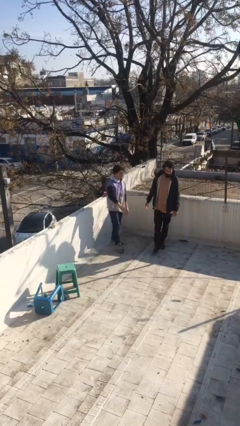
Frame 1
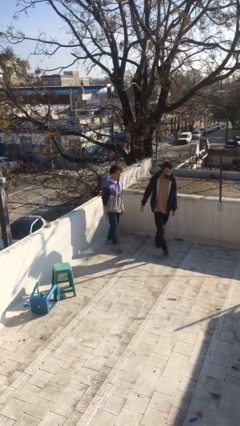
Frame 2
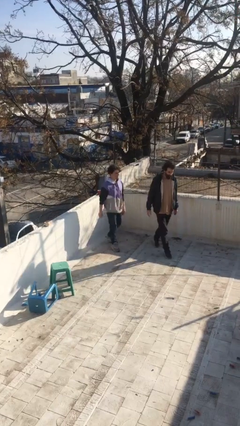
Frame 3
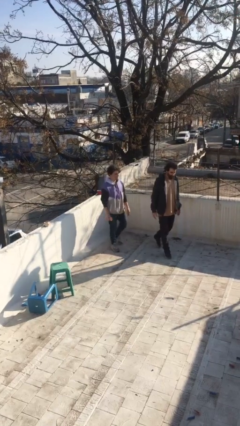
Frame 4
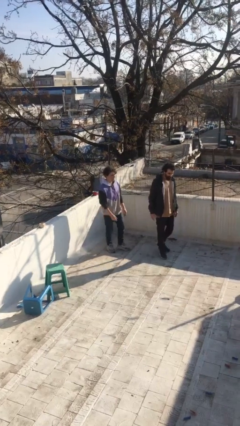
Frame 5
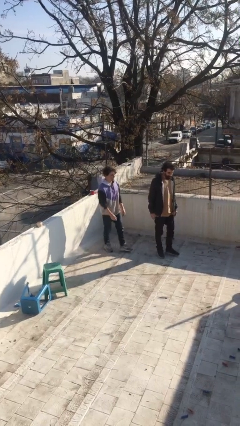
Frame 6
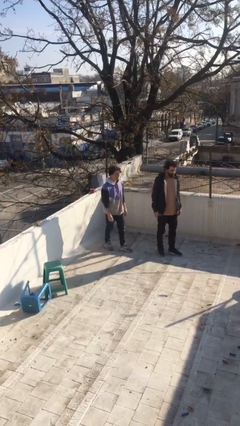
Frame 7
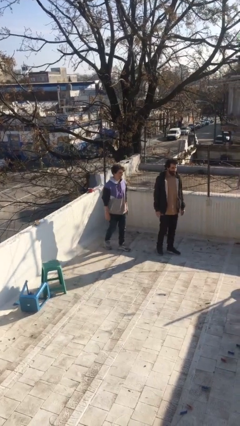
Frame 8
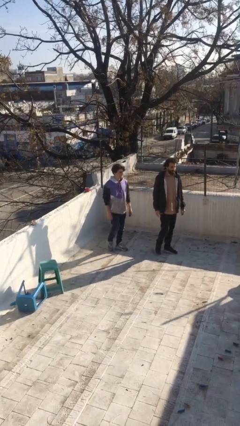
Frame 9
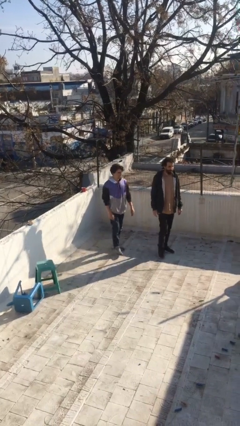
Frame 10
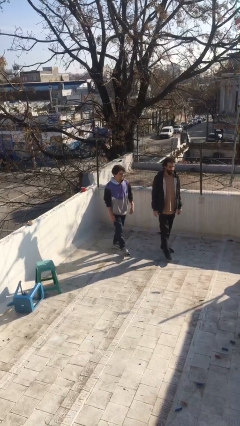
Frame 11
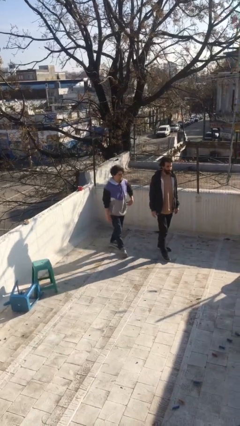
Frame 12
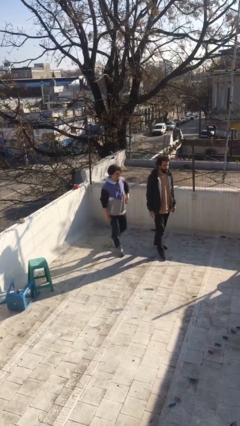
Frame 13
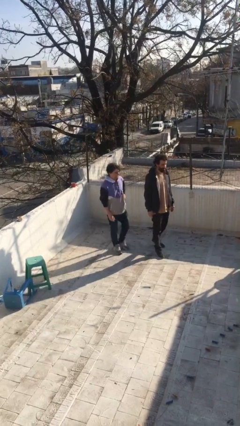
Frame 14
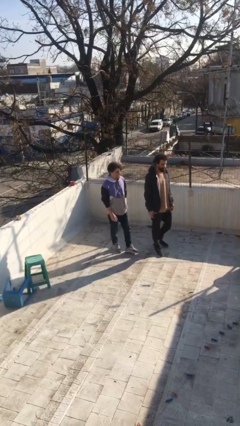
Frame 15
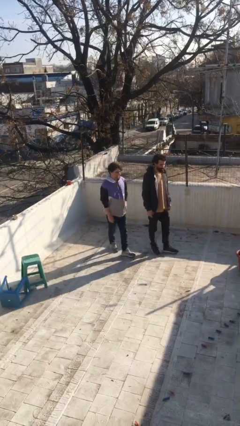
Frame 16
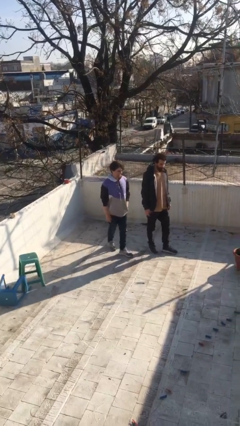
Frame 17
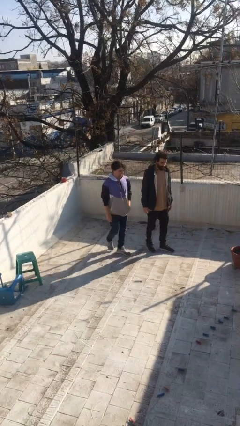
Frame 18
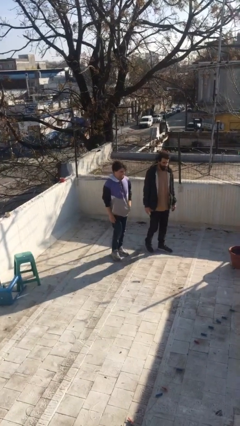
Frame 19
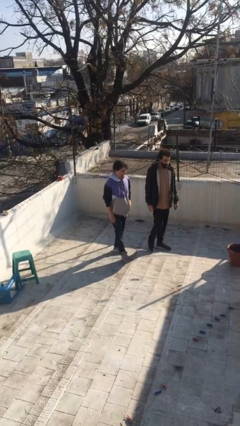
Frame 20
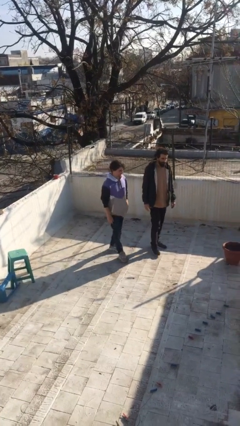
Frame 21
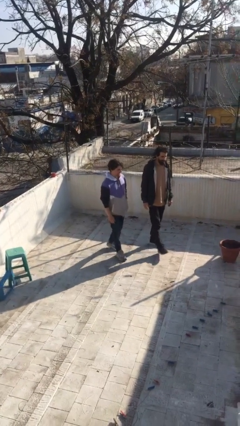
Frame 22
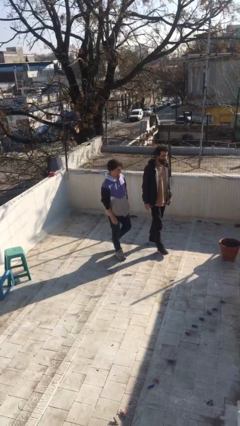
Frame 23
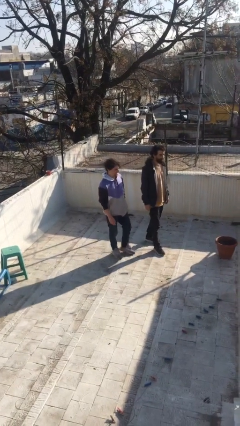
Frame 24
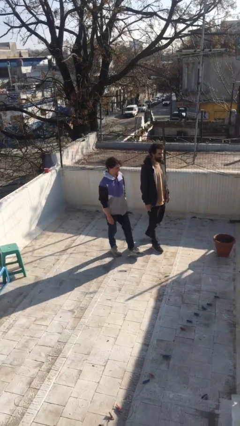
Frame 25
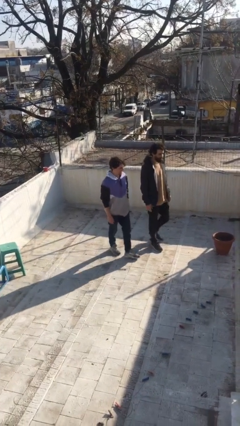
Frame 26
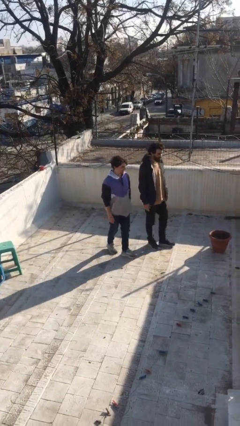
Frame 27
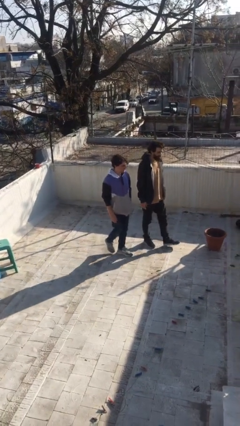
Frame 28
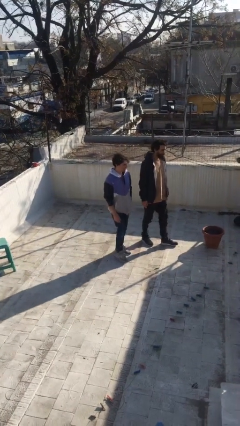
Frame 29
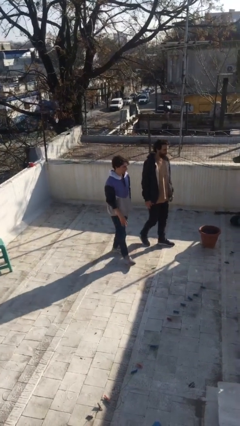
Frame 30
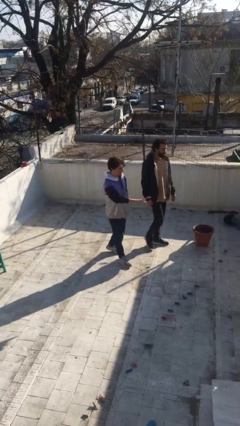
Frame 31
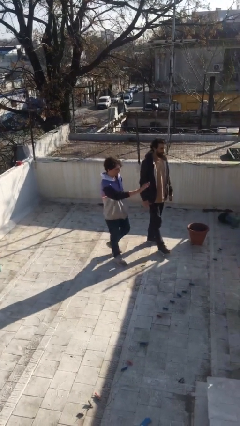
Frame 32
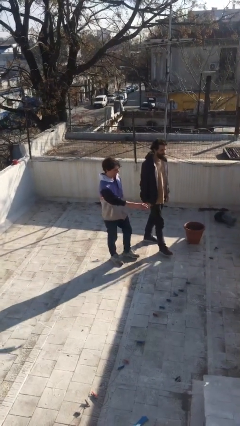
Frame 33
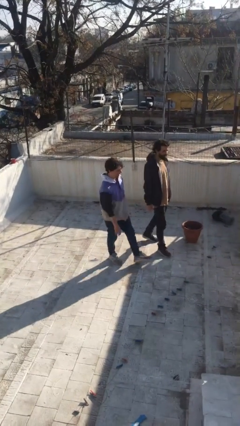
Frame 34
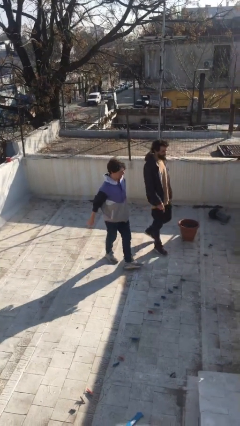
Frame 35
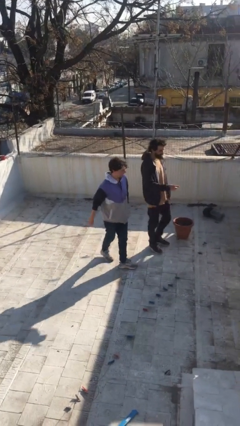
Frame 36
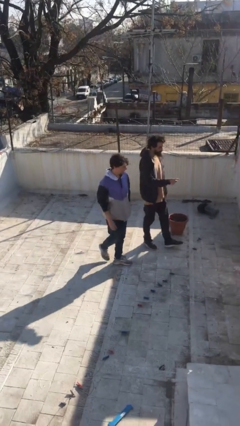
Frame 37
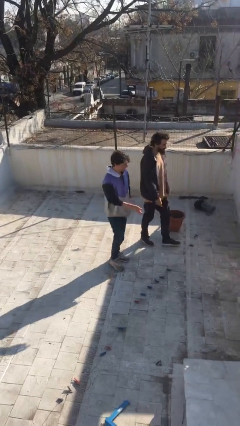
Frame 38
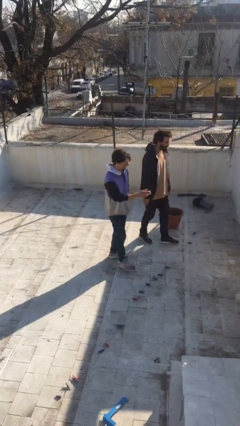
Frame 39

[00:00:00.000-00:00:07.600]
person talks to person

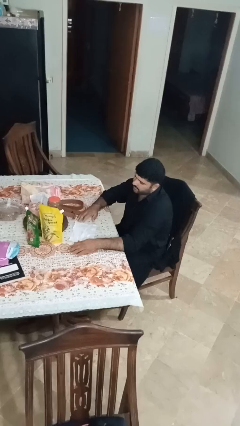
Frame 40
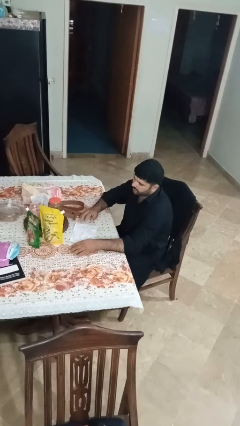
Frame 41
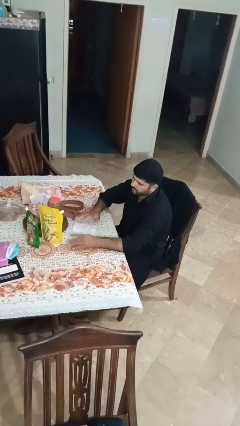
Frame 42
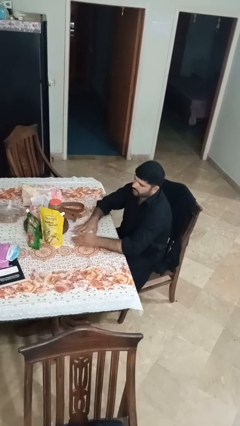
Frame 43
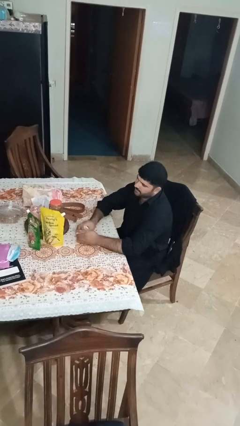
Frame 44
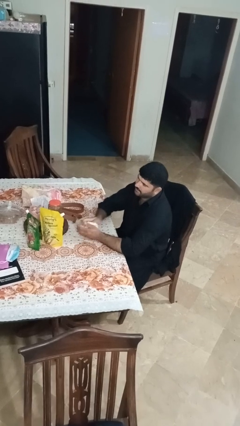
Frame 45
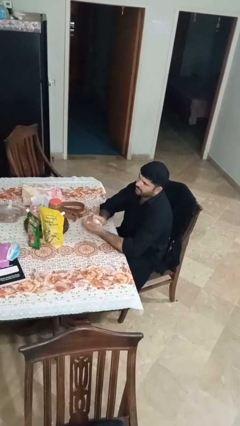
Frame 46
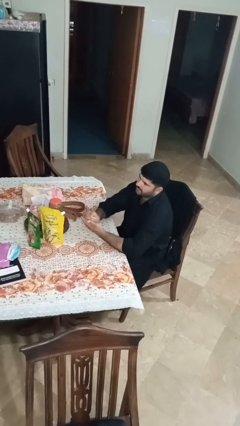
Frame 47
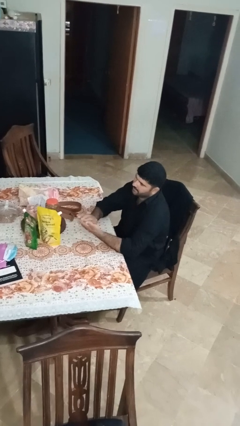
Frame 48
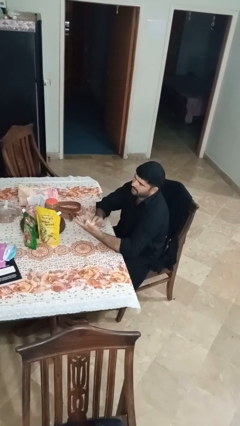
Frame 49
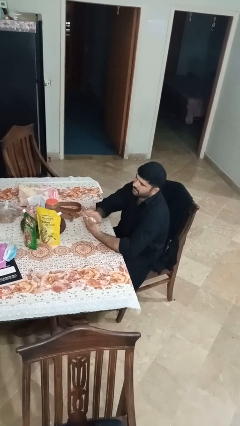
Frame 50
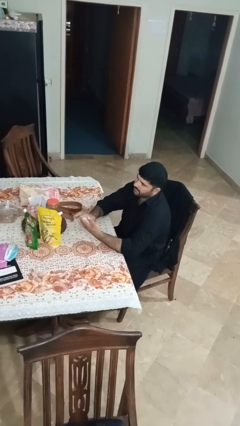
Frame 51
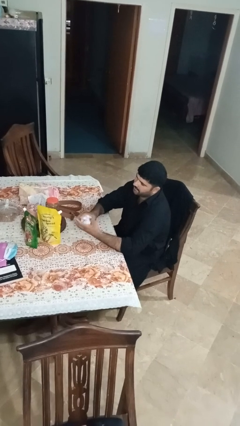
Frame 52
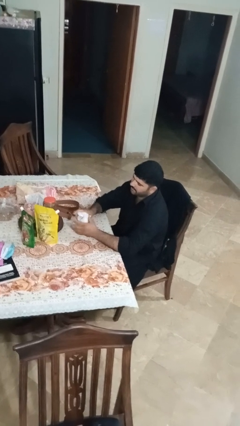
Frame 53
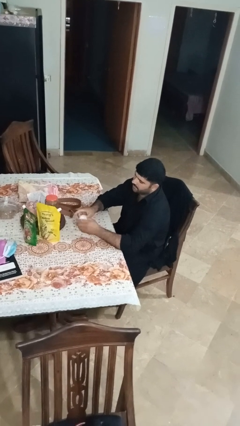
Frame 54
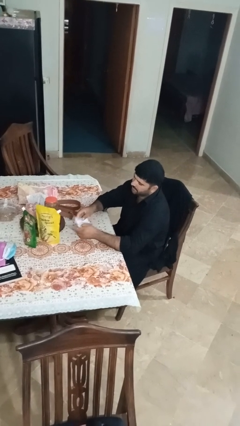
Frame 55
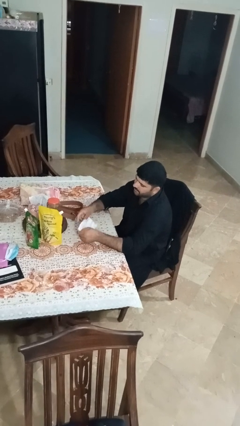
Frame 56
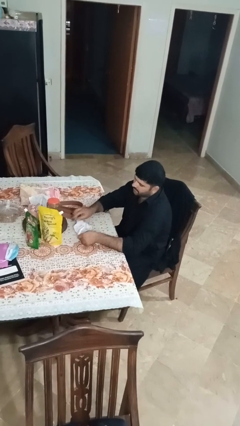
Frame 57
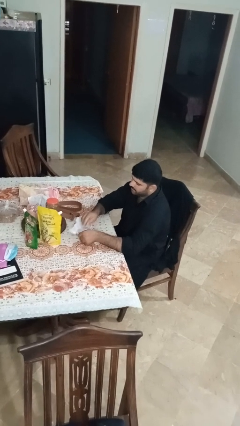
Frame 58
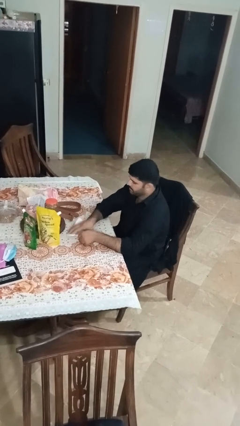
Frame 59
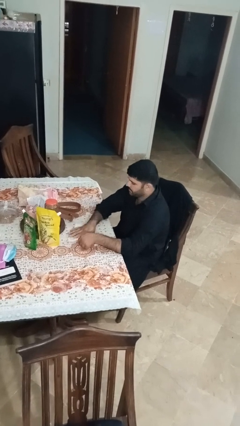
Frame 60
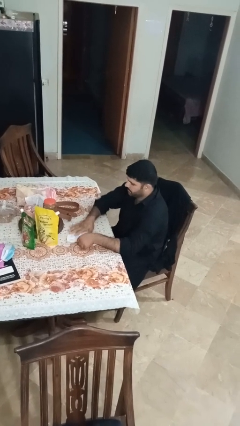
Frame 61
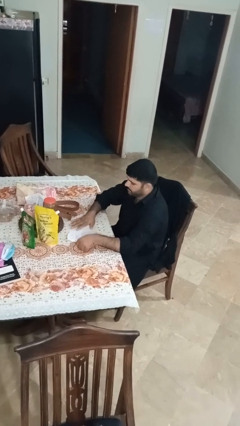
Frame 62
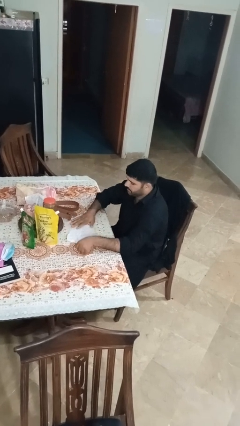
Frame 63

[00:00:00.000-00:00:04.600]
person crumples paper

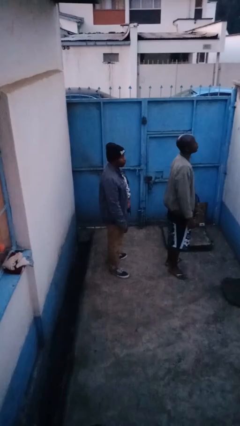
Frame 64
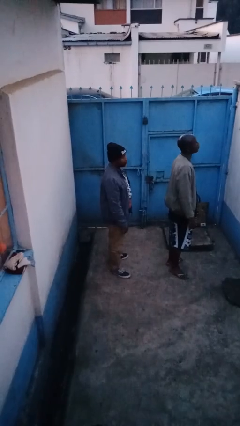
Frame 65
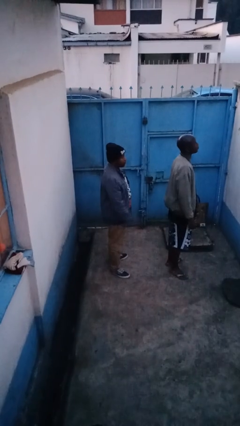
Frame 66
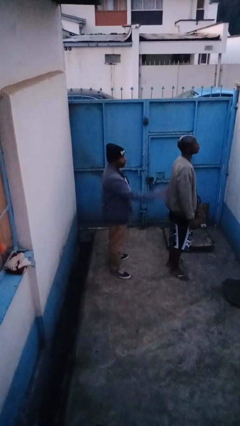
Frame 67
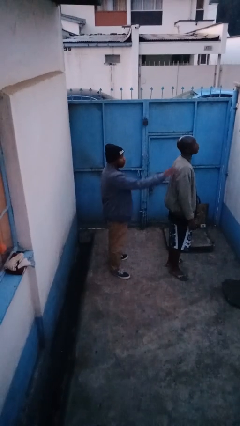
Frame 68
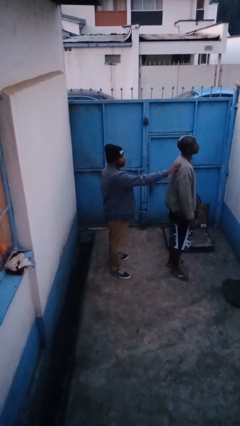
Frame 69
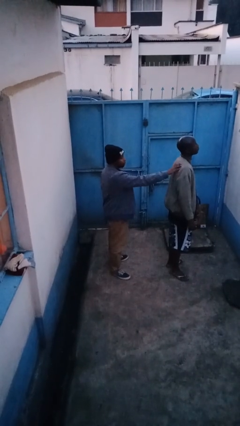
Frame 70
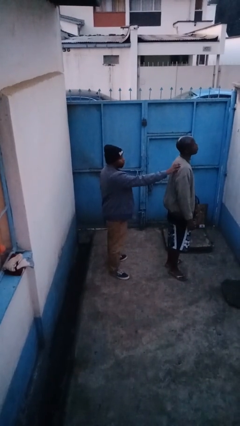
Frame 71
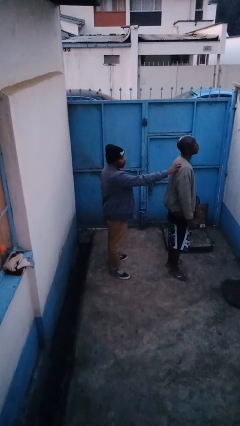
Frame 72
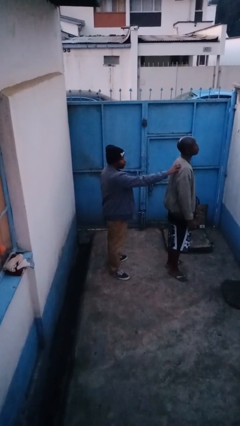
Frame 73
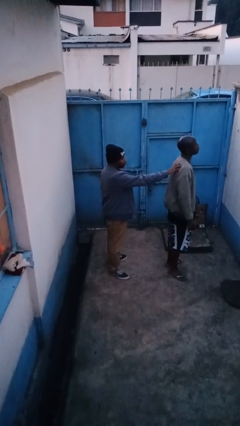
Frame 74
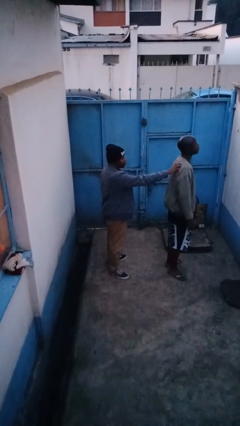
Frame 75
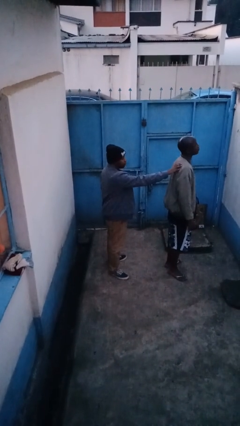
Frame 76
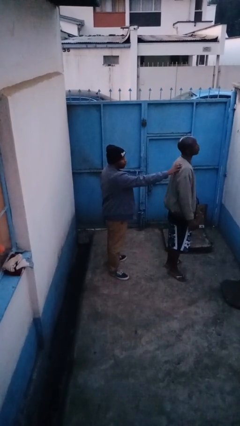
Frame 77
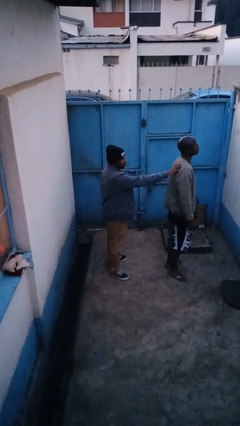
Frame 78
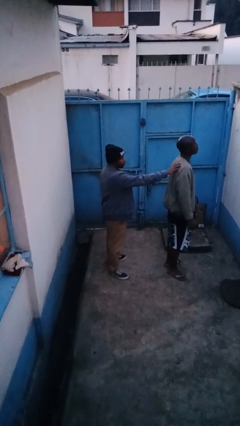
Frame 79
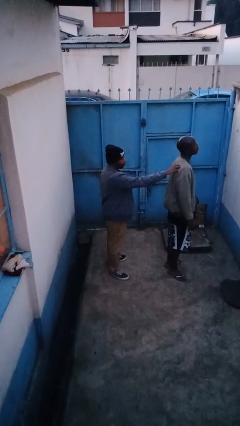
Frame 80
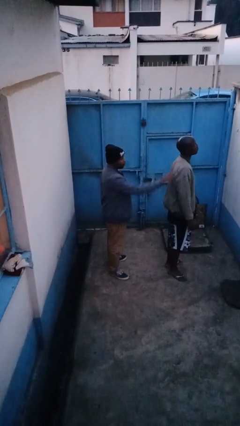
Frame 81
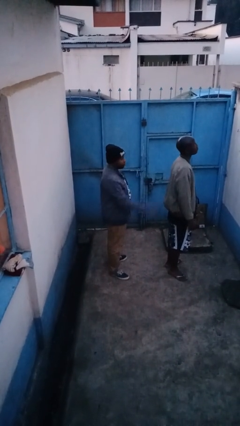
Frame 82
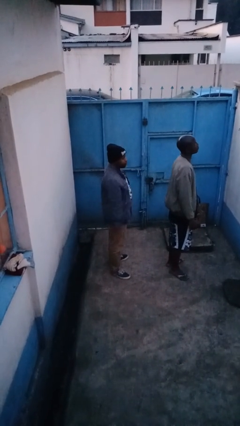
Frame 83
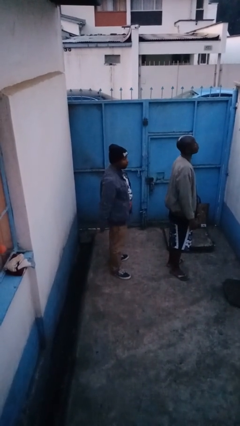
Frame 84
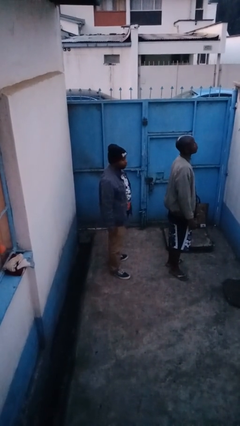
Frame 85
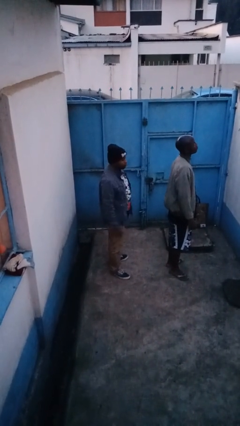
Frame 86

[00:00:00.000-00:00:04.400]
person touches back of person

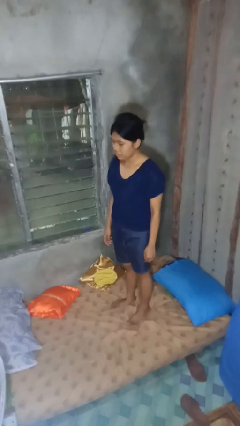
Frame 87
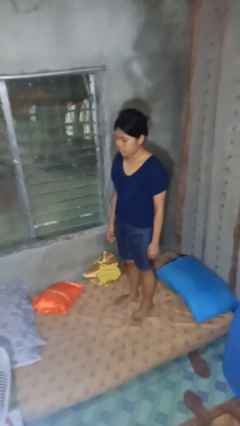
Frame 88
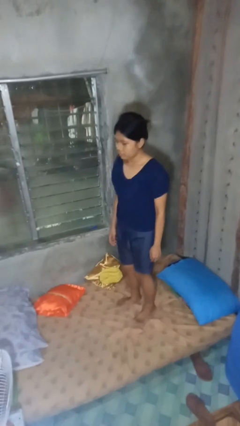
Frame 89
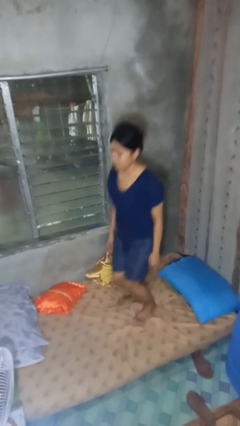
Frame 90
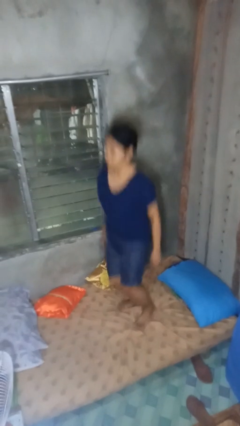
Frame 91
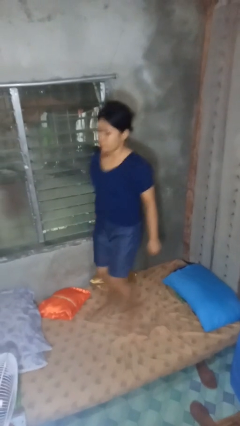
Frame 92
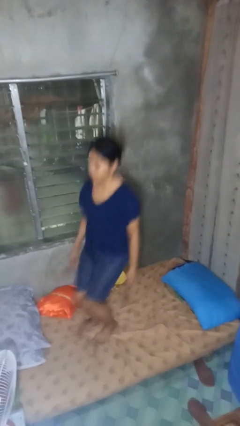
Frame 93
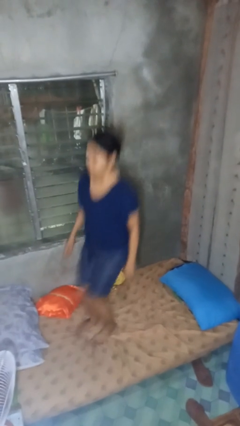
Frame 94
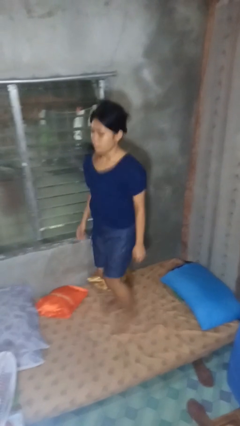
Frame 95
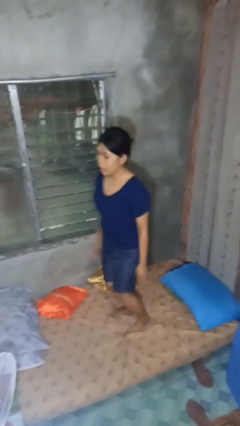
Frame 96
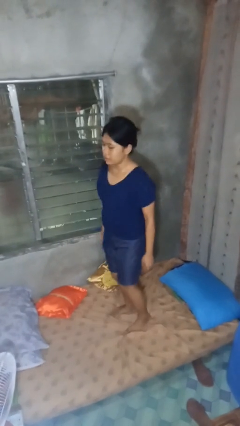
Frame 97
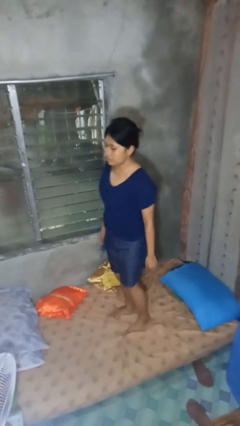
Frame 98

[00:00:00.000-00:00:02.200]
person jumps on bed
